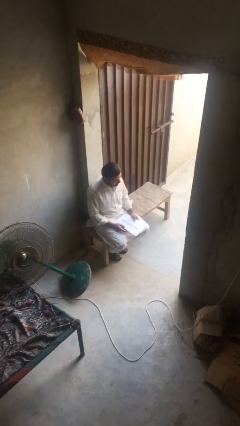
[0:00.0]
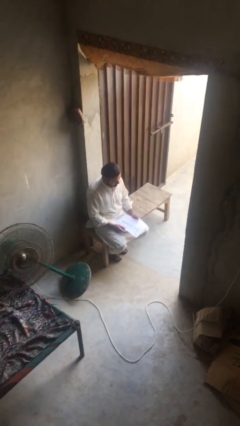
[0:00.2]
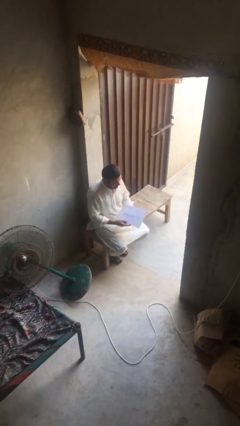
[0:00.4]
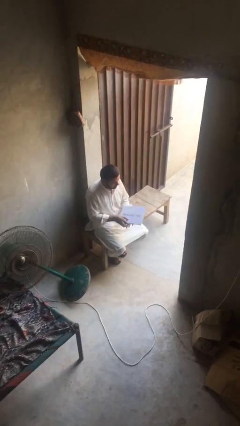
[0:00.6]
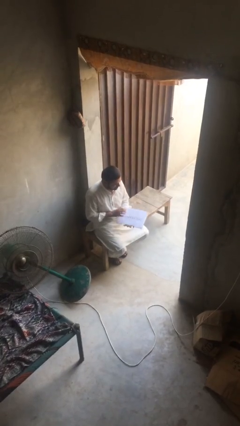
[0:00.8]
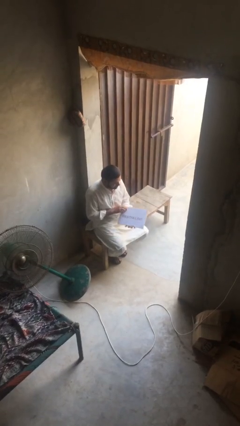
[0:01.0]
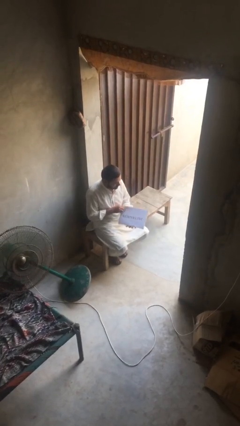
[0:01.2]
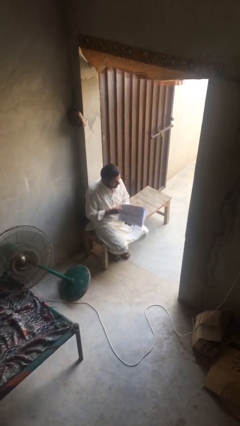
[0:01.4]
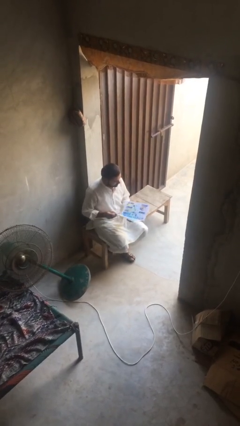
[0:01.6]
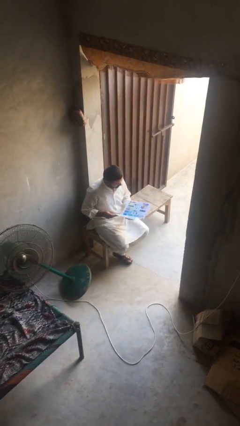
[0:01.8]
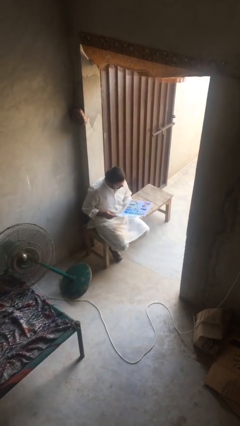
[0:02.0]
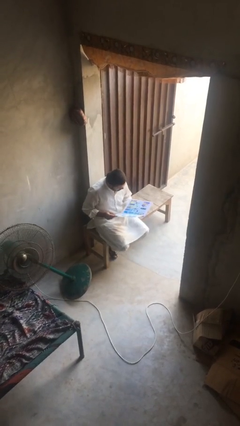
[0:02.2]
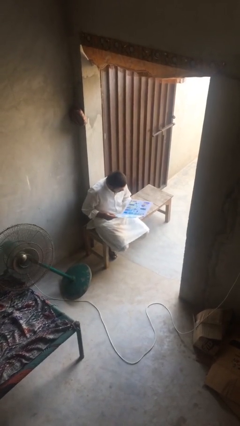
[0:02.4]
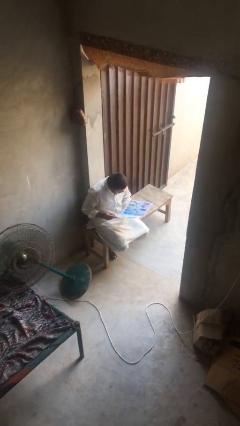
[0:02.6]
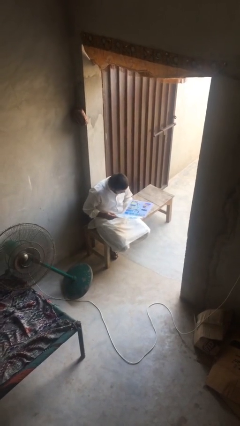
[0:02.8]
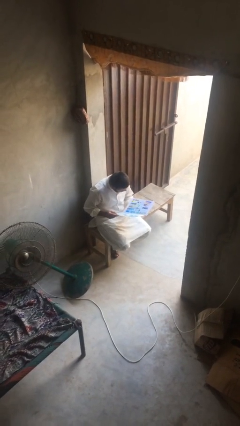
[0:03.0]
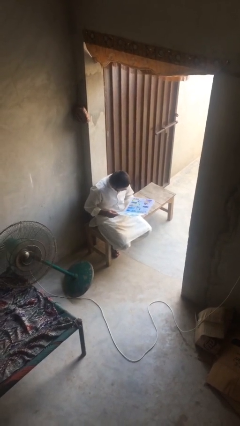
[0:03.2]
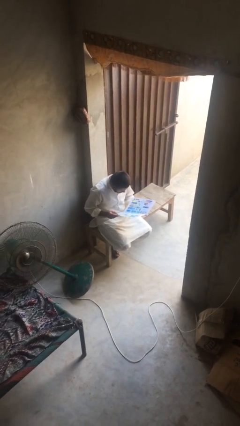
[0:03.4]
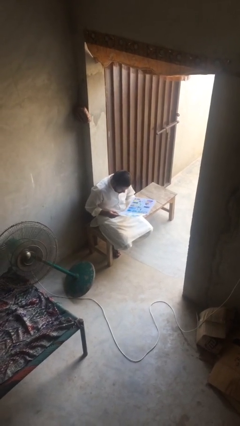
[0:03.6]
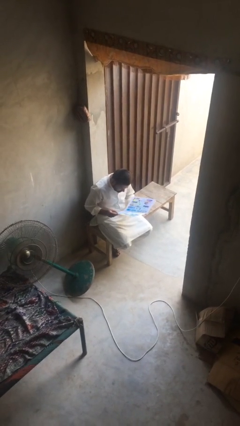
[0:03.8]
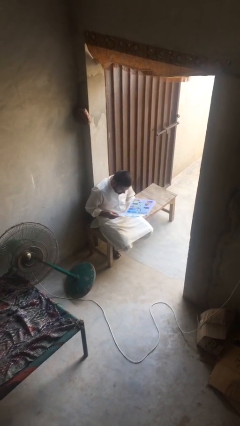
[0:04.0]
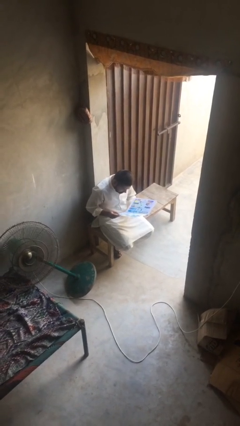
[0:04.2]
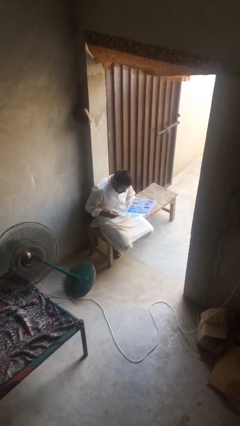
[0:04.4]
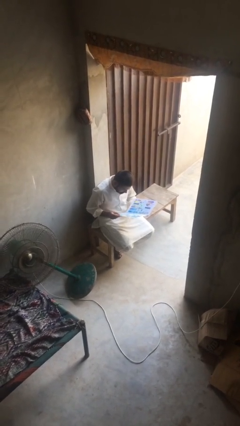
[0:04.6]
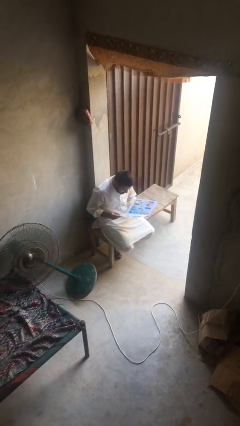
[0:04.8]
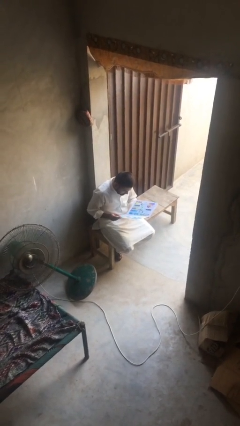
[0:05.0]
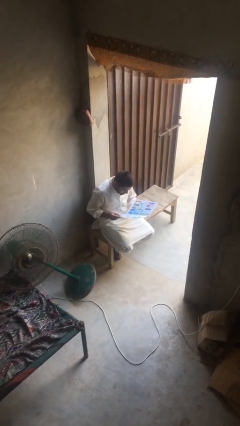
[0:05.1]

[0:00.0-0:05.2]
person reads document

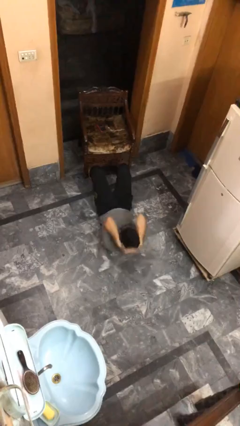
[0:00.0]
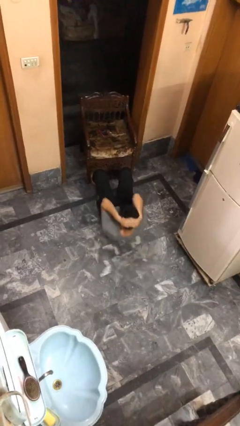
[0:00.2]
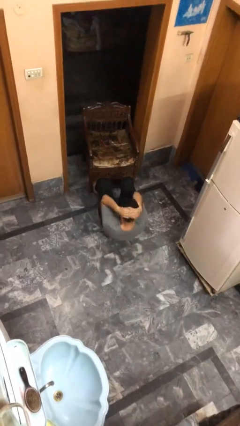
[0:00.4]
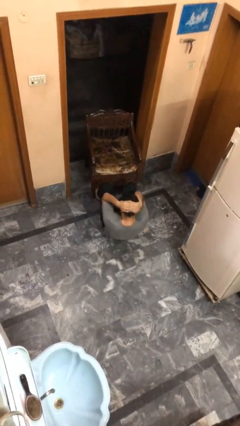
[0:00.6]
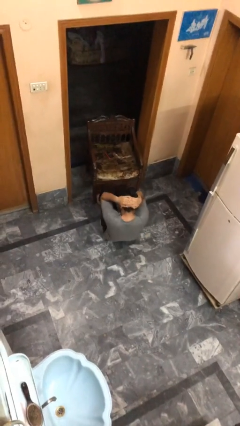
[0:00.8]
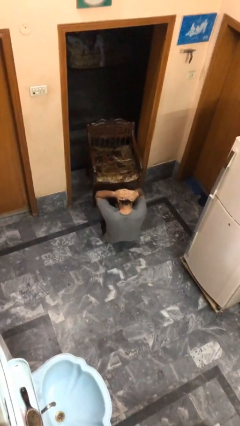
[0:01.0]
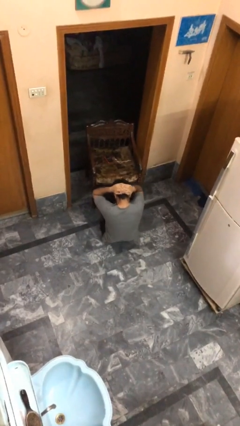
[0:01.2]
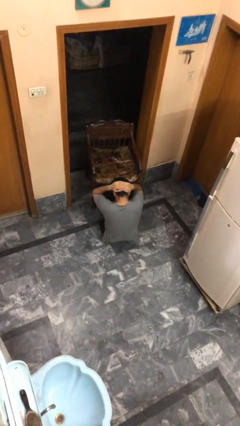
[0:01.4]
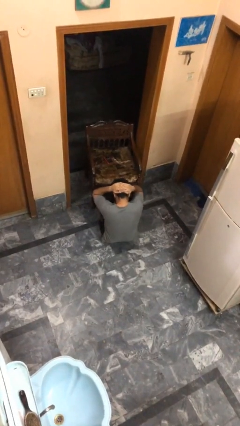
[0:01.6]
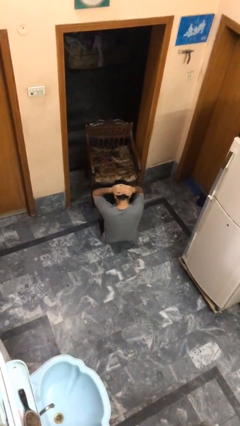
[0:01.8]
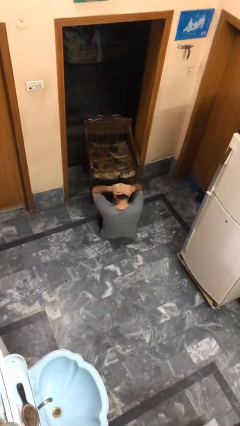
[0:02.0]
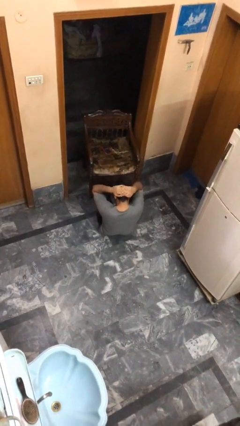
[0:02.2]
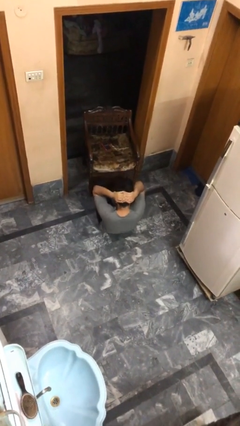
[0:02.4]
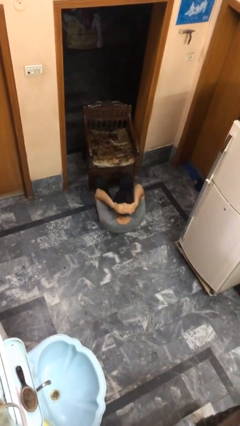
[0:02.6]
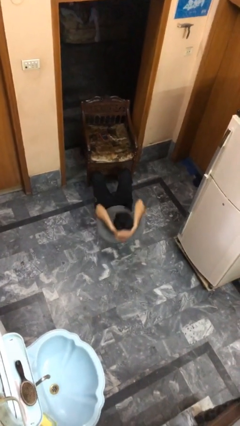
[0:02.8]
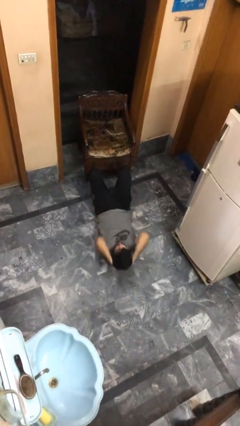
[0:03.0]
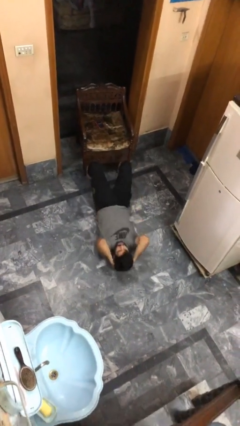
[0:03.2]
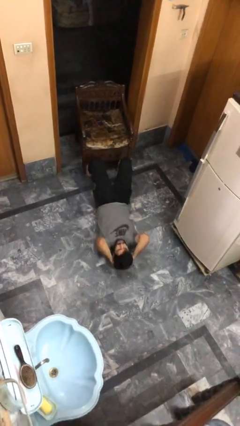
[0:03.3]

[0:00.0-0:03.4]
person exercises with situp

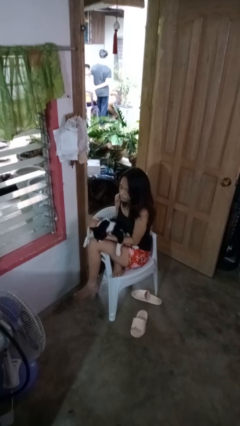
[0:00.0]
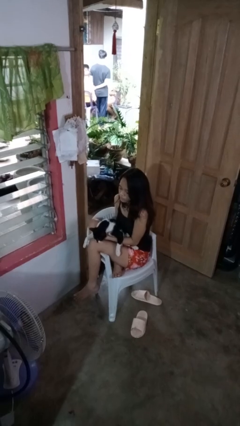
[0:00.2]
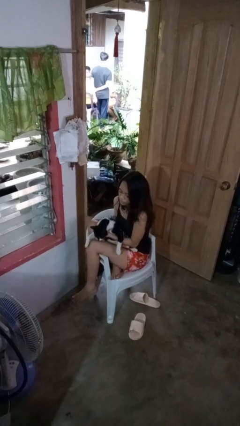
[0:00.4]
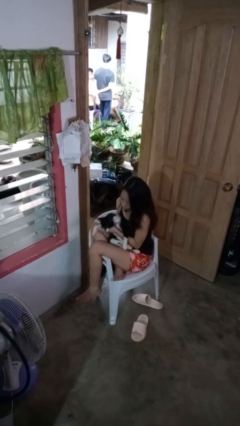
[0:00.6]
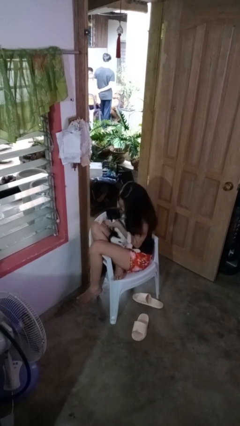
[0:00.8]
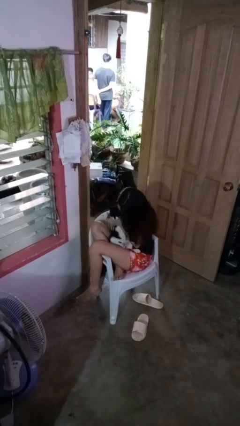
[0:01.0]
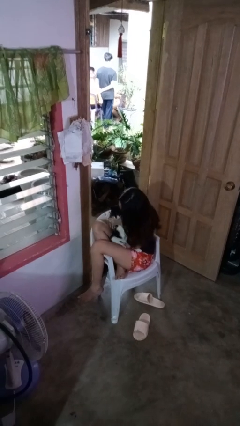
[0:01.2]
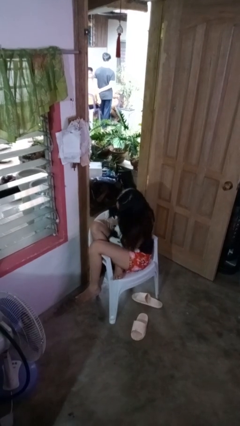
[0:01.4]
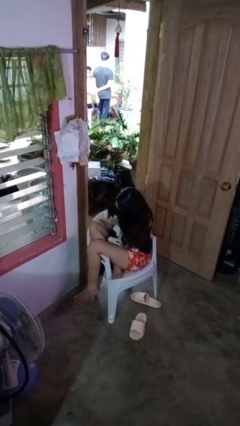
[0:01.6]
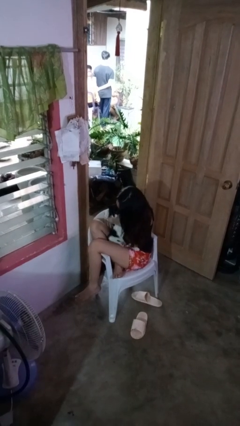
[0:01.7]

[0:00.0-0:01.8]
person hugs cat

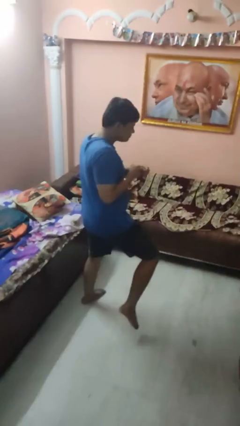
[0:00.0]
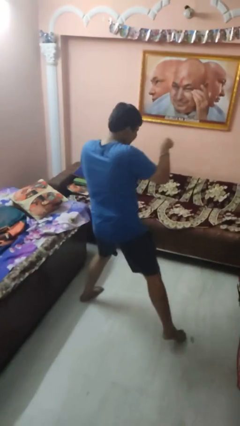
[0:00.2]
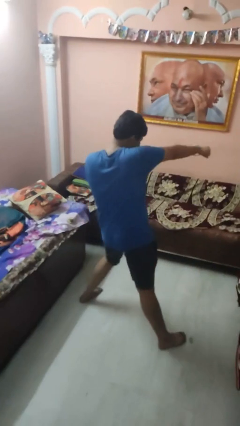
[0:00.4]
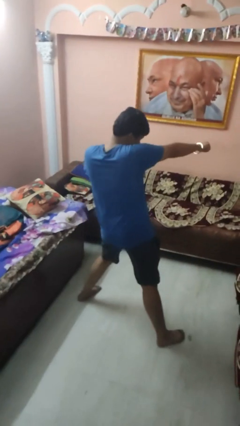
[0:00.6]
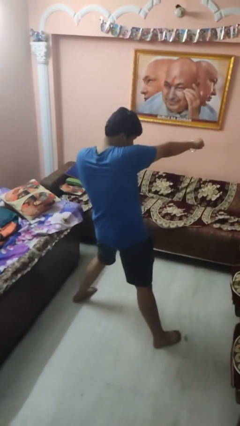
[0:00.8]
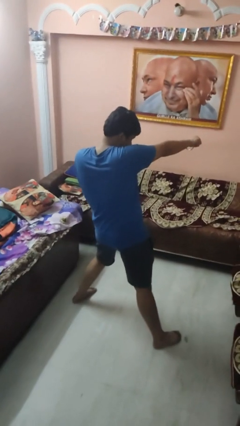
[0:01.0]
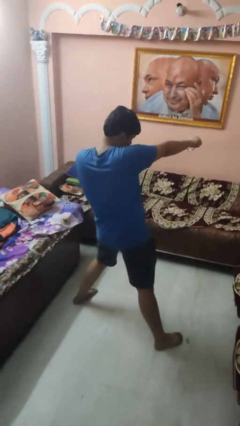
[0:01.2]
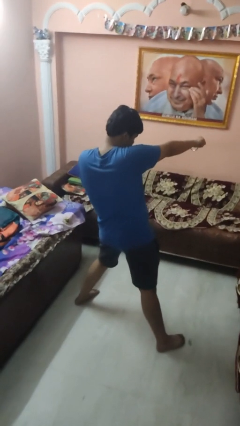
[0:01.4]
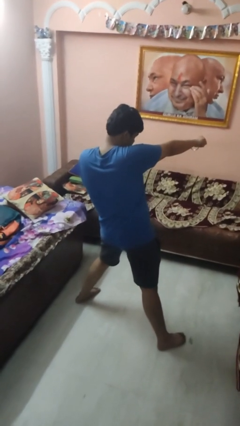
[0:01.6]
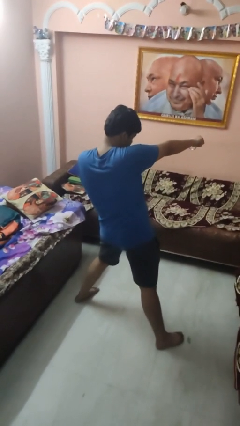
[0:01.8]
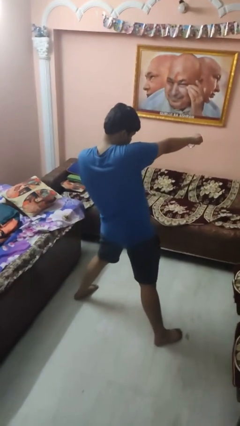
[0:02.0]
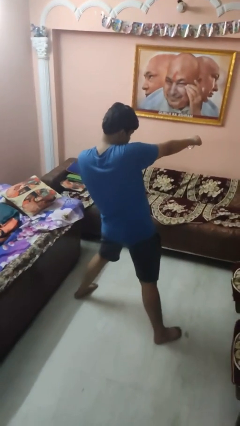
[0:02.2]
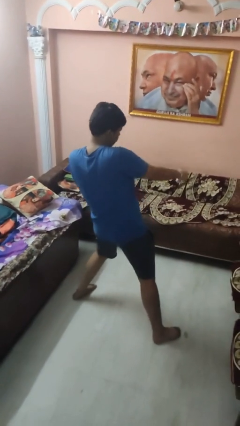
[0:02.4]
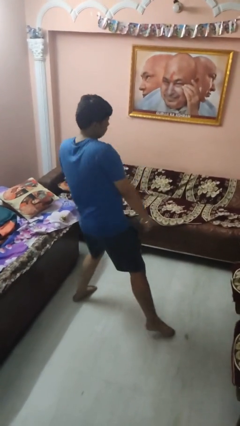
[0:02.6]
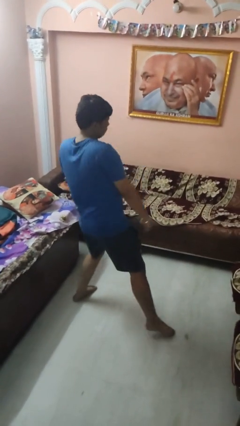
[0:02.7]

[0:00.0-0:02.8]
person punches

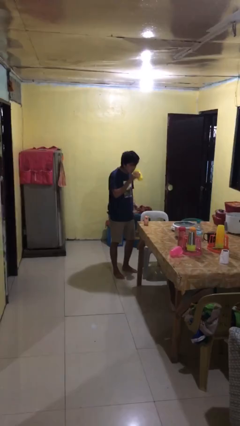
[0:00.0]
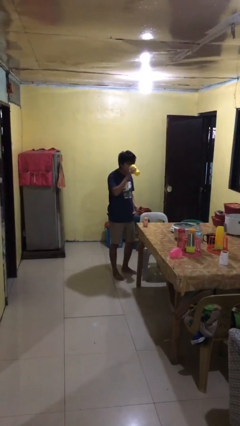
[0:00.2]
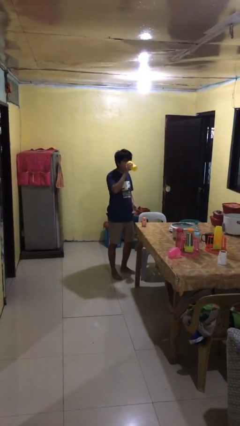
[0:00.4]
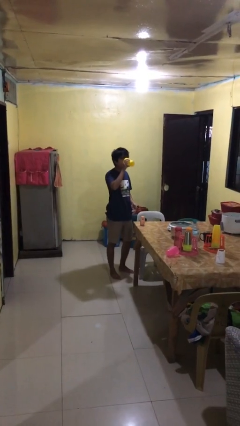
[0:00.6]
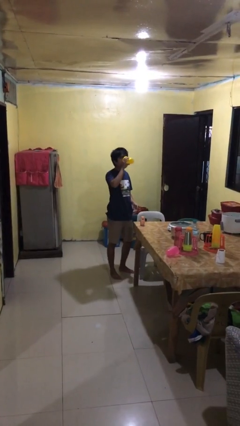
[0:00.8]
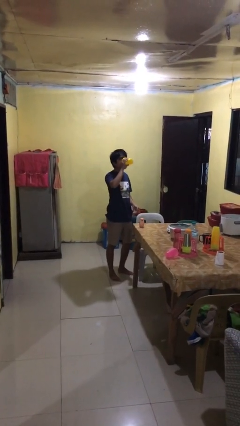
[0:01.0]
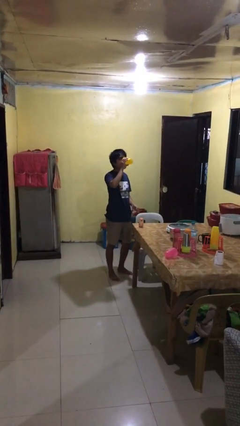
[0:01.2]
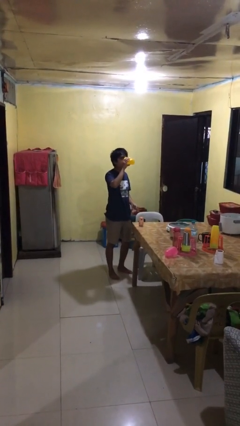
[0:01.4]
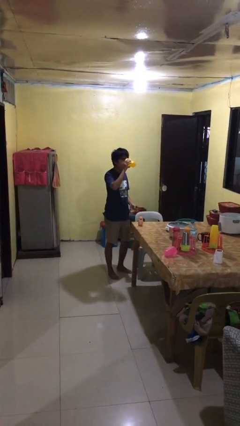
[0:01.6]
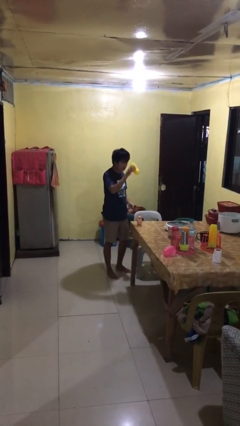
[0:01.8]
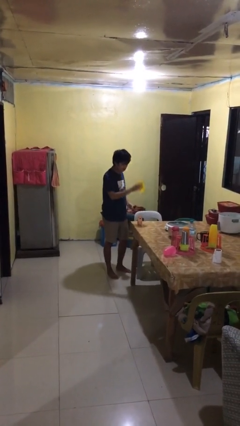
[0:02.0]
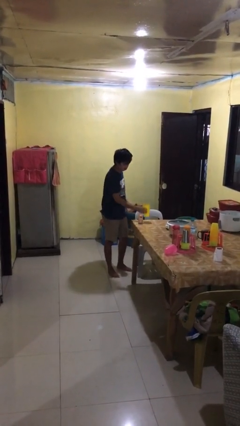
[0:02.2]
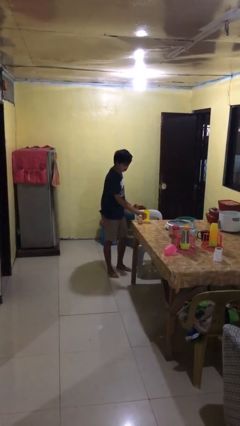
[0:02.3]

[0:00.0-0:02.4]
person drinks from cup

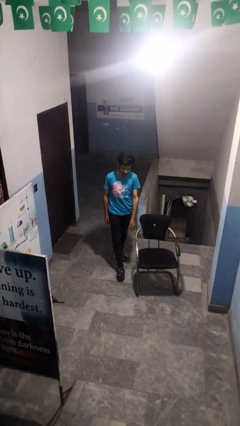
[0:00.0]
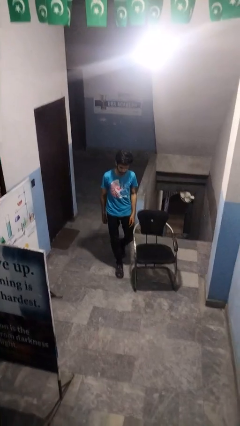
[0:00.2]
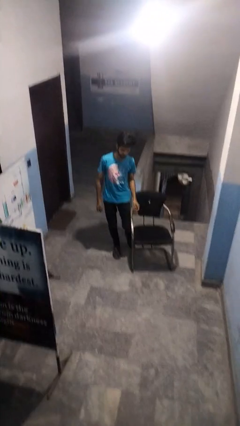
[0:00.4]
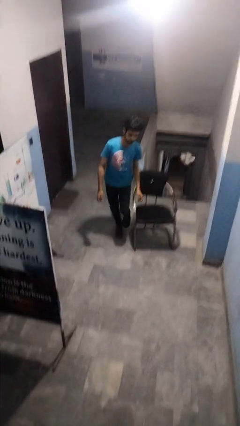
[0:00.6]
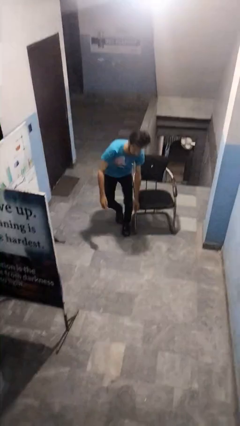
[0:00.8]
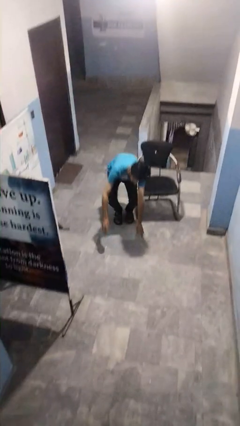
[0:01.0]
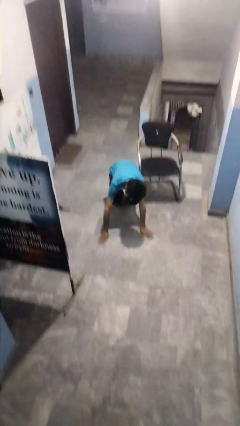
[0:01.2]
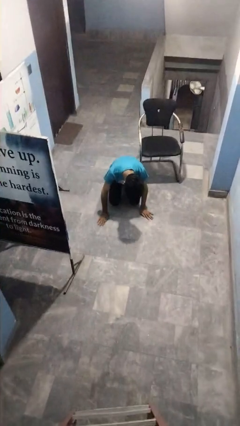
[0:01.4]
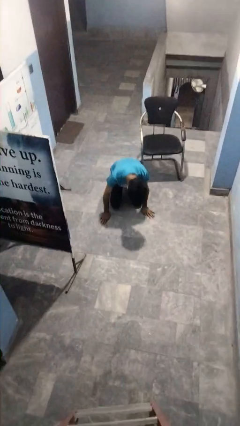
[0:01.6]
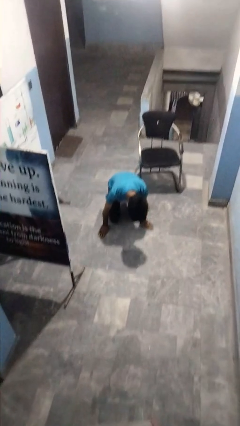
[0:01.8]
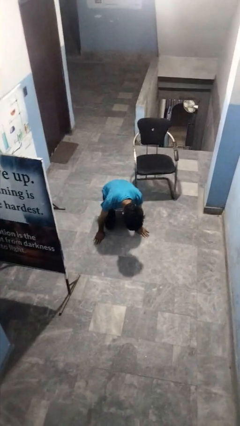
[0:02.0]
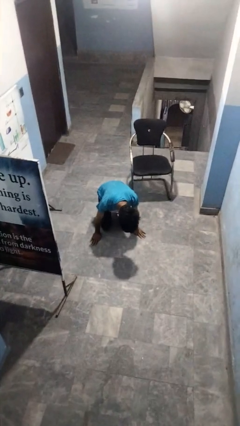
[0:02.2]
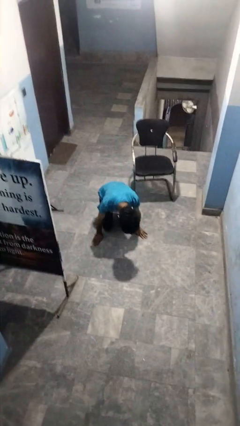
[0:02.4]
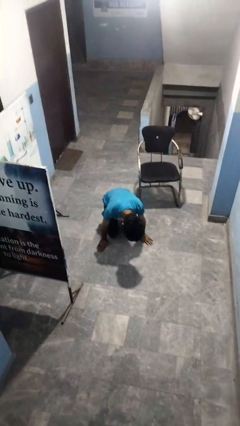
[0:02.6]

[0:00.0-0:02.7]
person trips on object on floor
